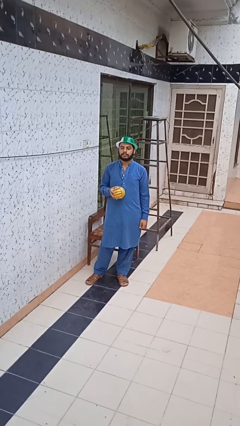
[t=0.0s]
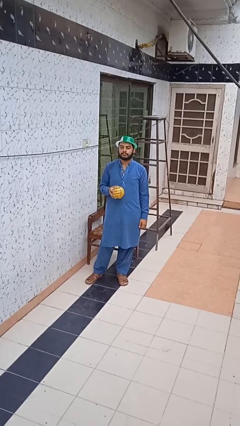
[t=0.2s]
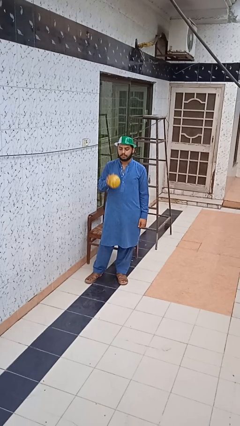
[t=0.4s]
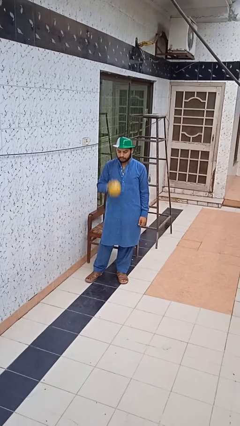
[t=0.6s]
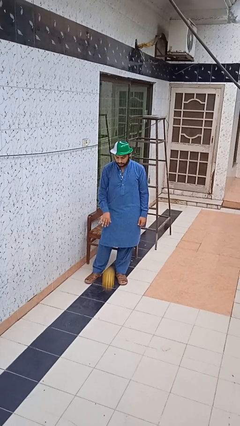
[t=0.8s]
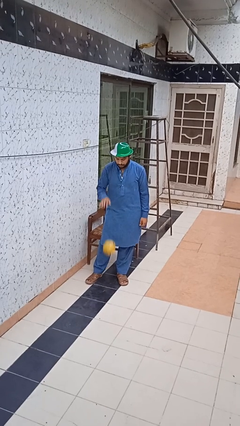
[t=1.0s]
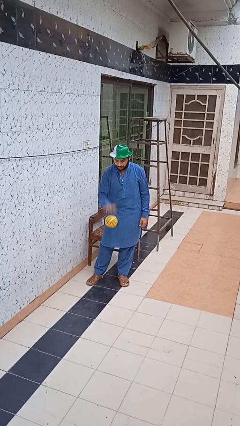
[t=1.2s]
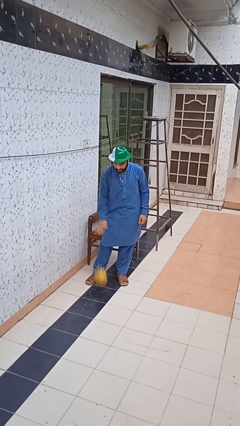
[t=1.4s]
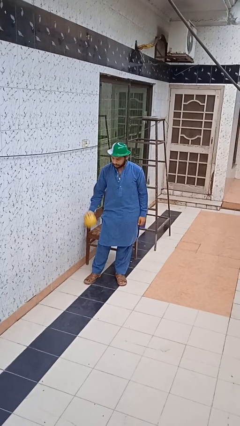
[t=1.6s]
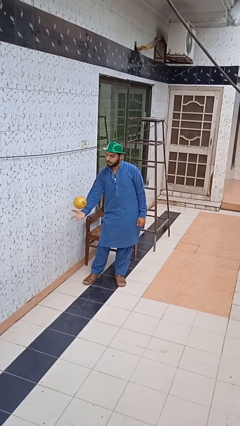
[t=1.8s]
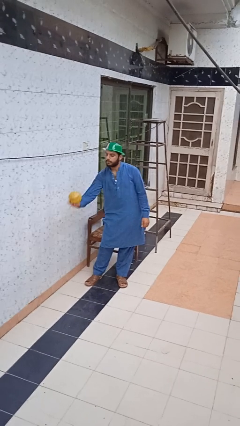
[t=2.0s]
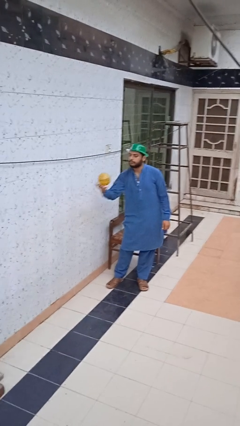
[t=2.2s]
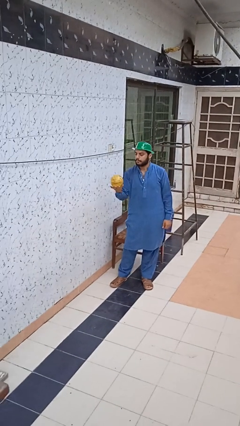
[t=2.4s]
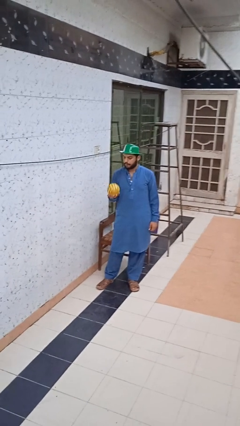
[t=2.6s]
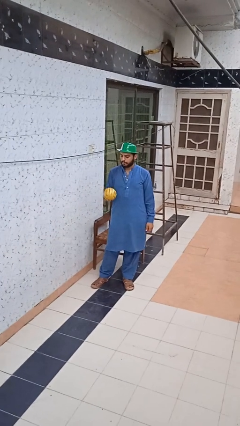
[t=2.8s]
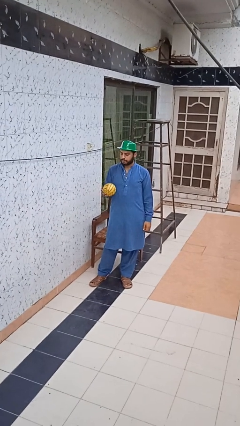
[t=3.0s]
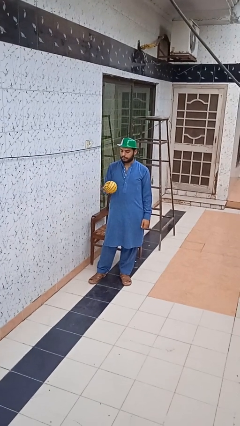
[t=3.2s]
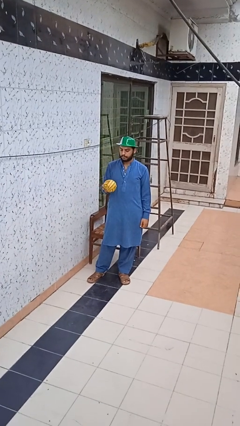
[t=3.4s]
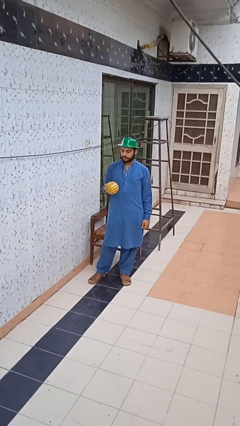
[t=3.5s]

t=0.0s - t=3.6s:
person bounces ball on floor

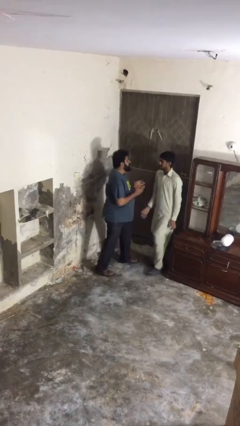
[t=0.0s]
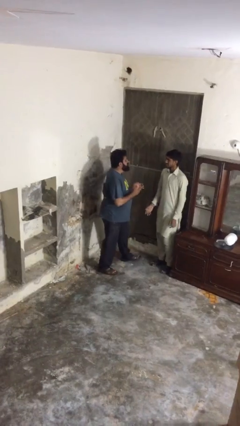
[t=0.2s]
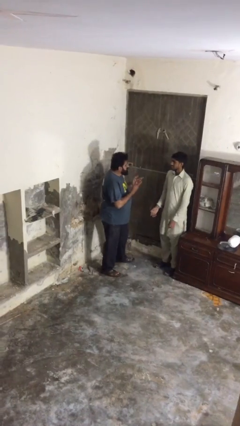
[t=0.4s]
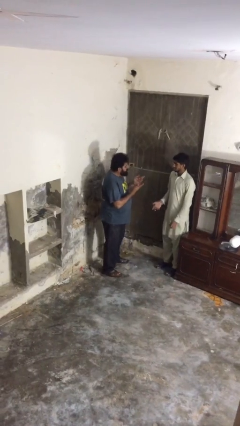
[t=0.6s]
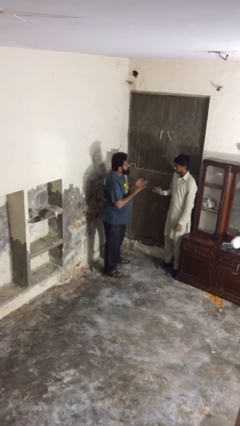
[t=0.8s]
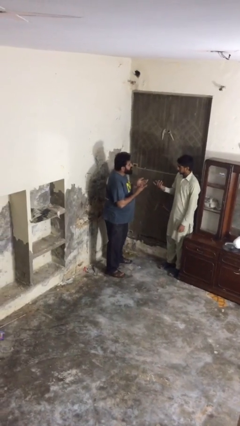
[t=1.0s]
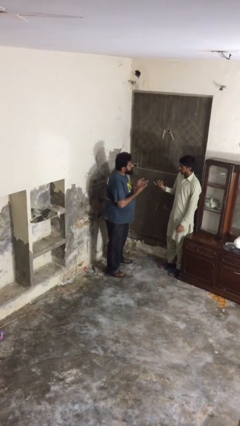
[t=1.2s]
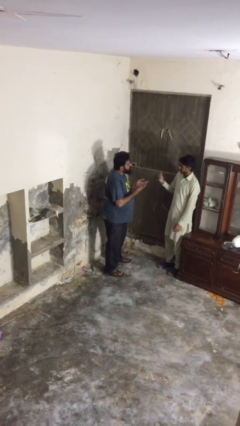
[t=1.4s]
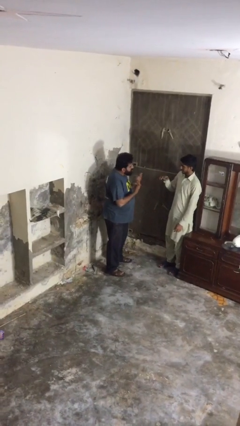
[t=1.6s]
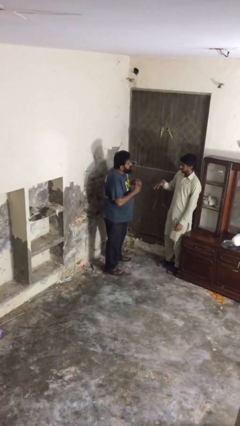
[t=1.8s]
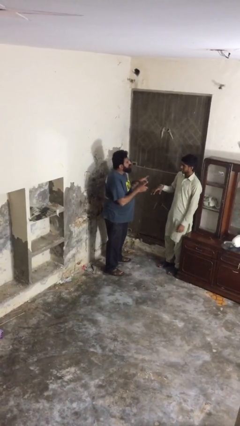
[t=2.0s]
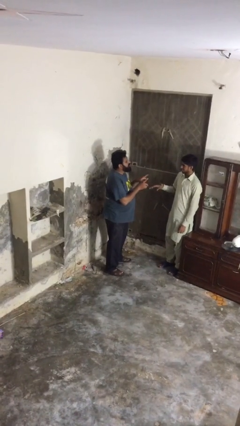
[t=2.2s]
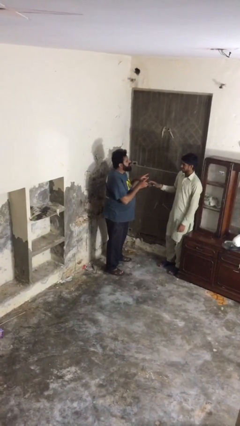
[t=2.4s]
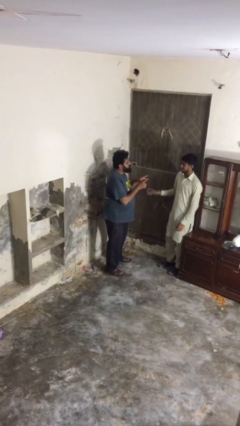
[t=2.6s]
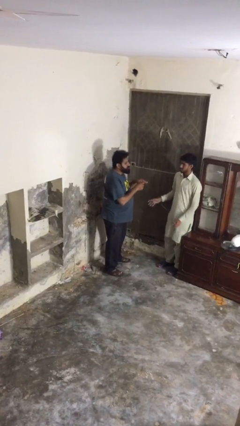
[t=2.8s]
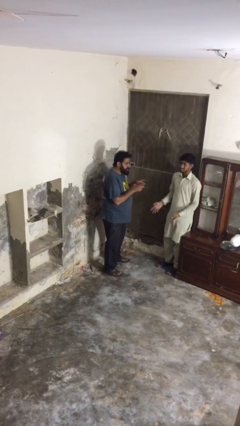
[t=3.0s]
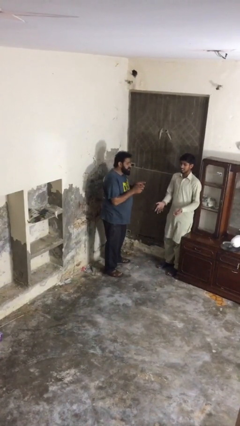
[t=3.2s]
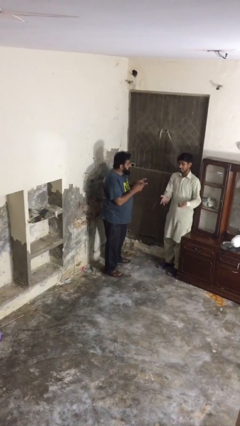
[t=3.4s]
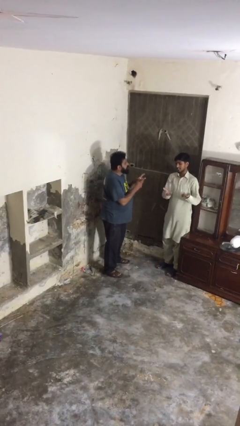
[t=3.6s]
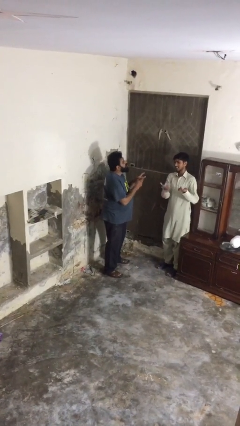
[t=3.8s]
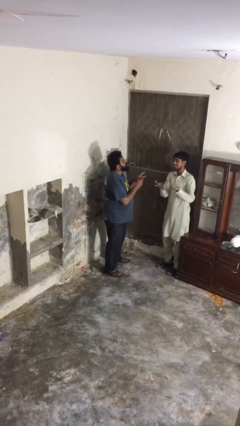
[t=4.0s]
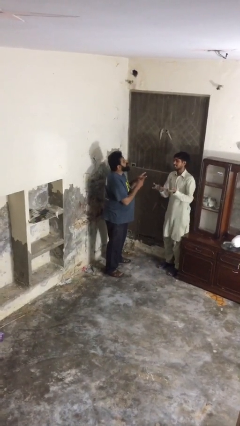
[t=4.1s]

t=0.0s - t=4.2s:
person talks to person

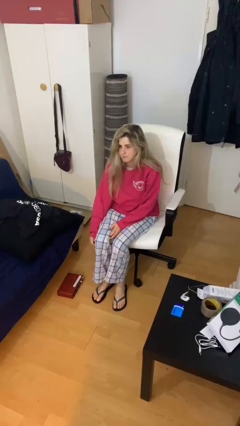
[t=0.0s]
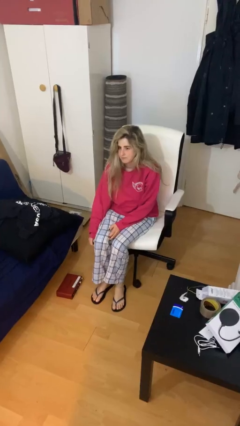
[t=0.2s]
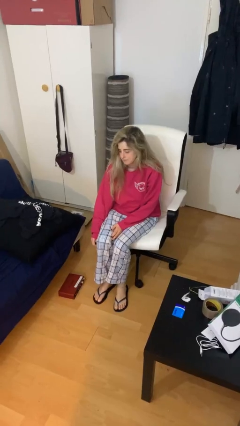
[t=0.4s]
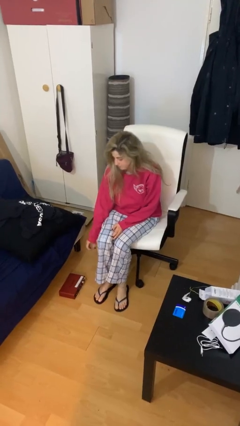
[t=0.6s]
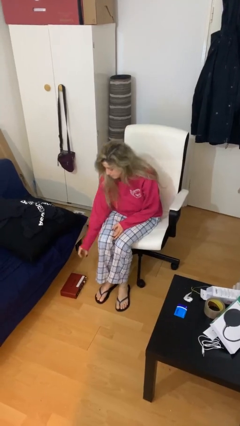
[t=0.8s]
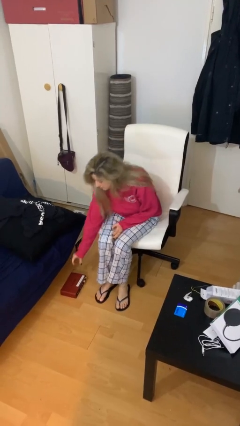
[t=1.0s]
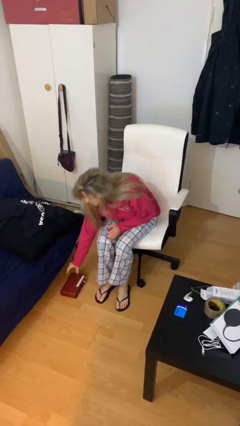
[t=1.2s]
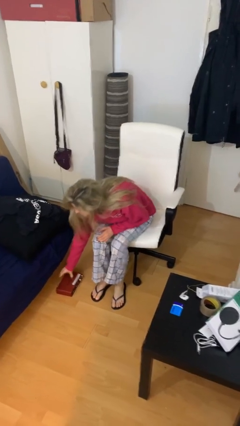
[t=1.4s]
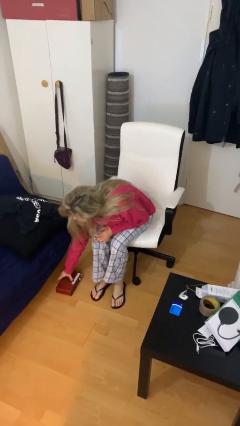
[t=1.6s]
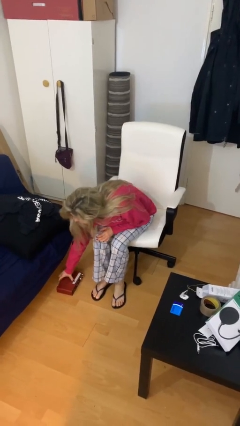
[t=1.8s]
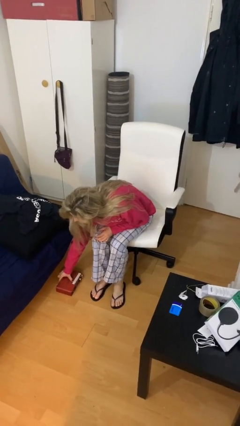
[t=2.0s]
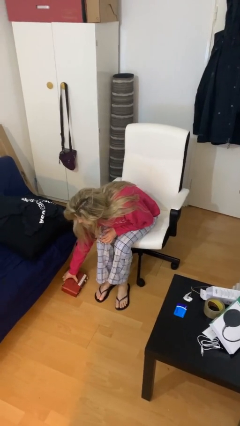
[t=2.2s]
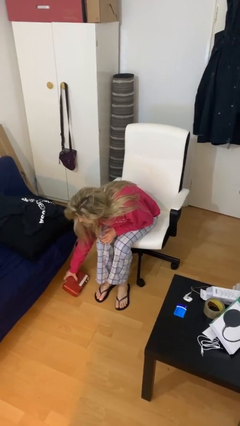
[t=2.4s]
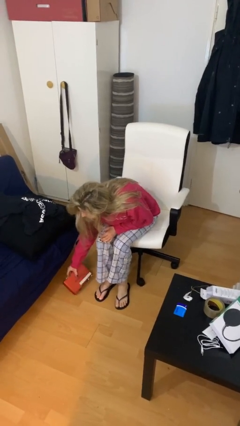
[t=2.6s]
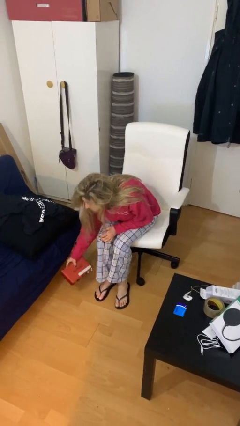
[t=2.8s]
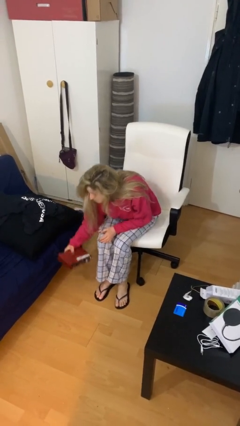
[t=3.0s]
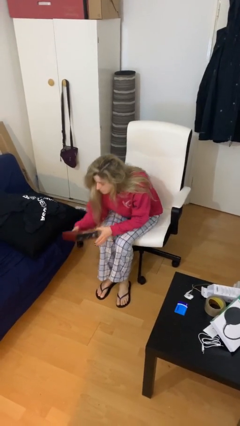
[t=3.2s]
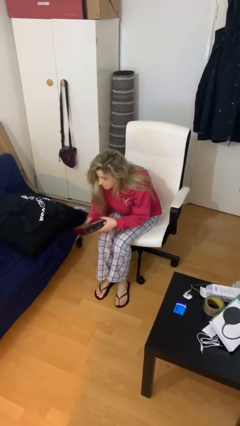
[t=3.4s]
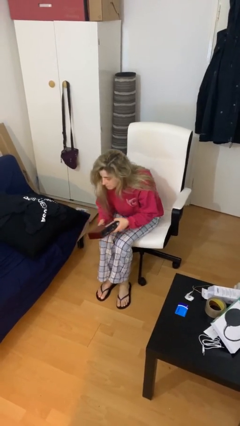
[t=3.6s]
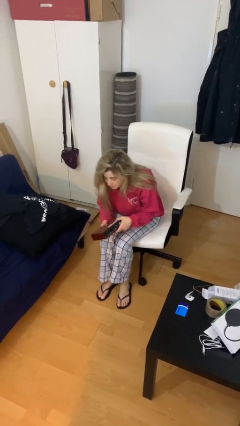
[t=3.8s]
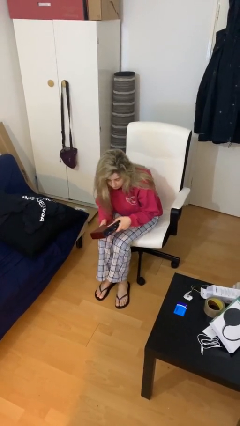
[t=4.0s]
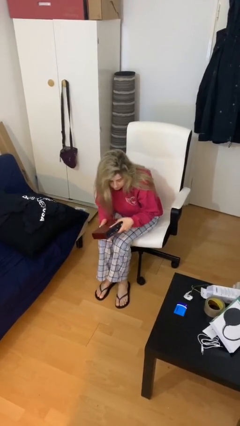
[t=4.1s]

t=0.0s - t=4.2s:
person picks up object from floor

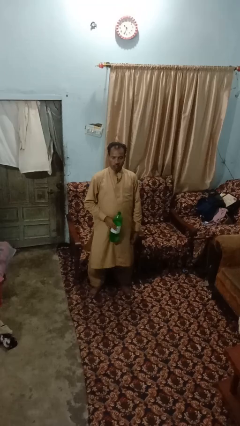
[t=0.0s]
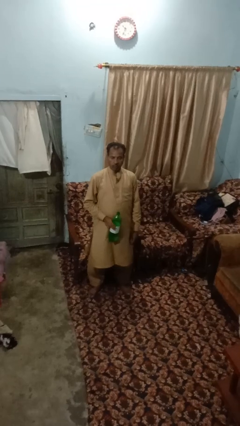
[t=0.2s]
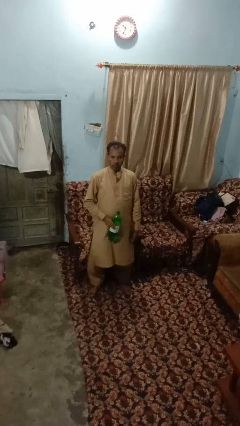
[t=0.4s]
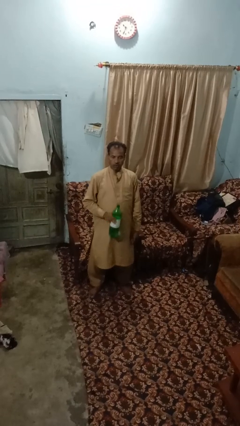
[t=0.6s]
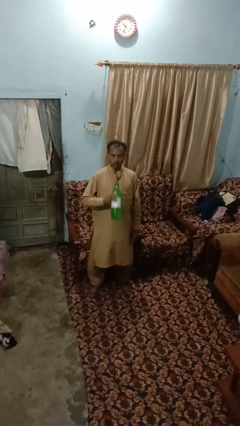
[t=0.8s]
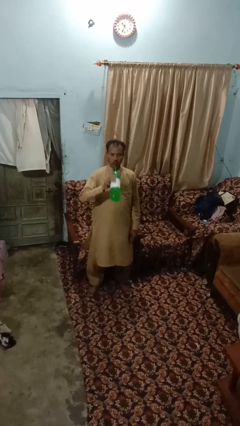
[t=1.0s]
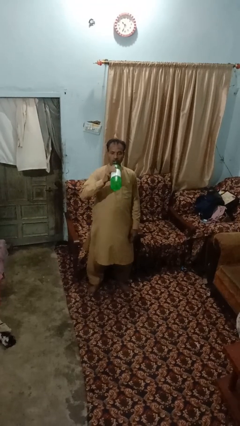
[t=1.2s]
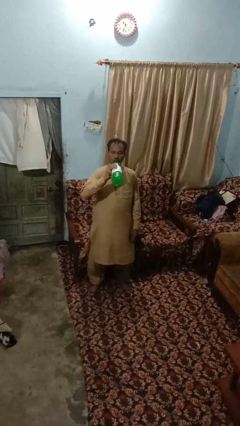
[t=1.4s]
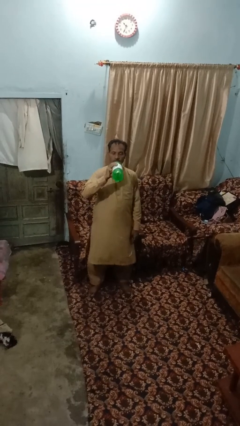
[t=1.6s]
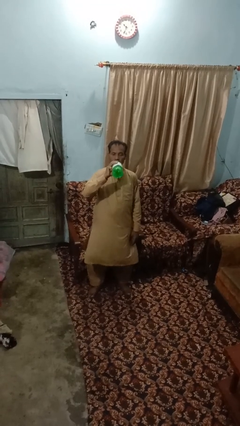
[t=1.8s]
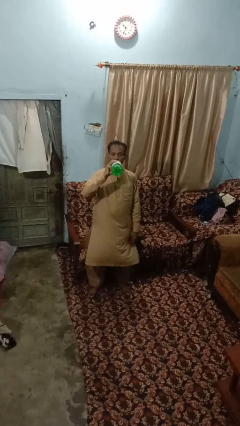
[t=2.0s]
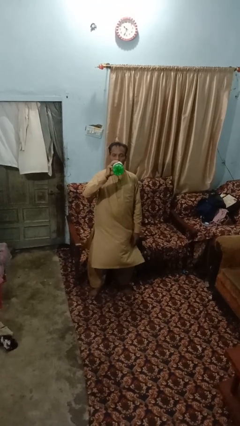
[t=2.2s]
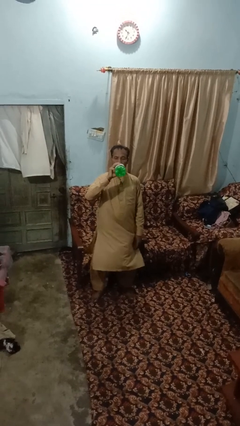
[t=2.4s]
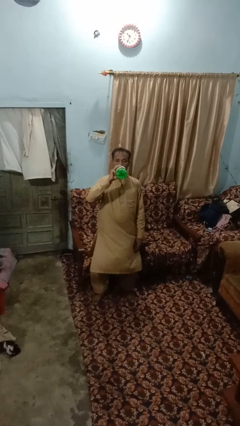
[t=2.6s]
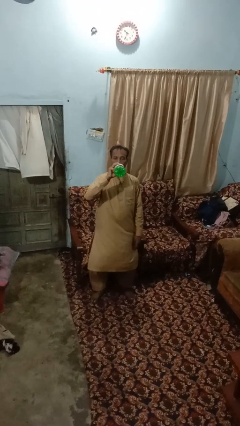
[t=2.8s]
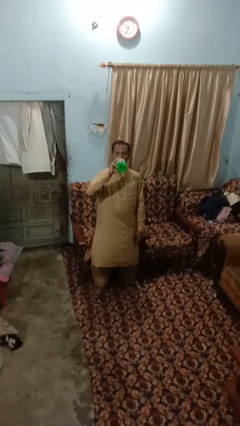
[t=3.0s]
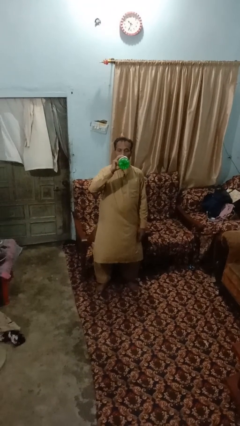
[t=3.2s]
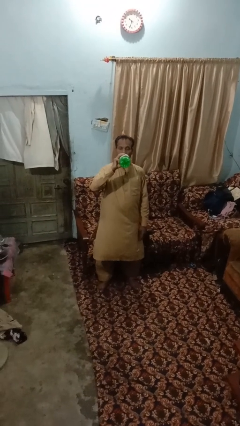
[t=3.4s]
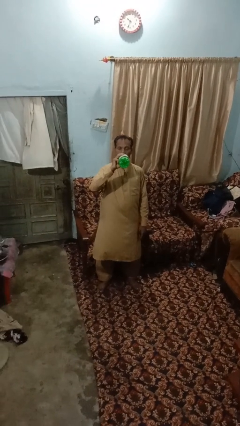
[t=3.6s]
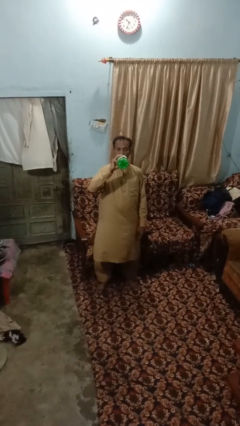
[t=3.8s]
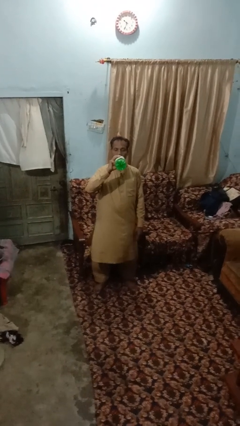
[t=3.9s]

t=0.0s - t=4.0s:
person drinks from bottle

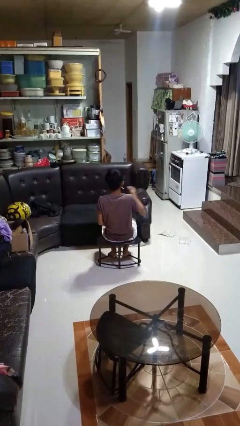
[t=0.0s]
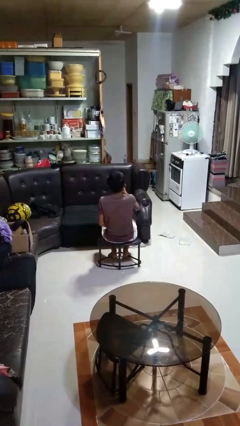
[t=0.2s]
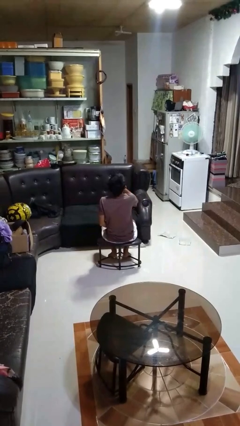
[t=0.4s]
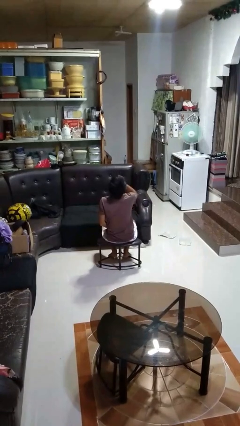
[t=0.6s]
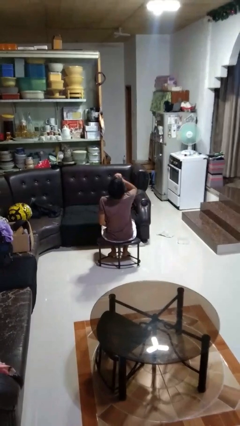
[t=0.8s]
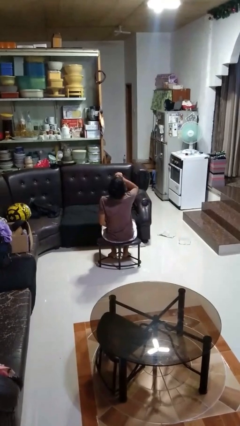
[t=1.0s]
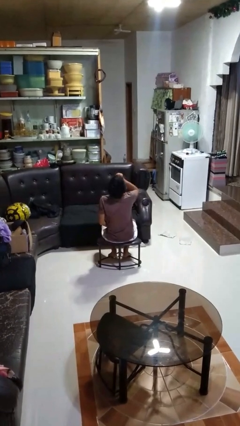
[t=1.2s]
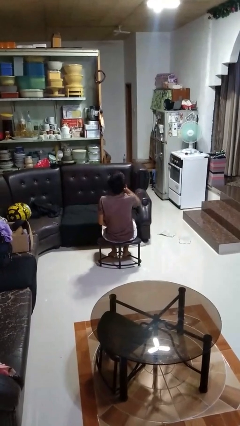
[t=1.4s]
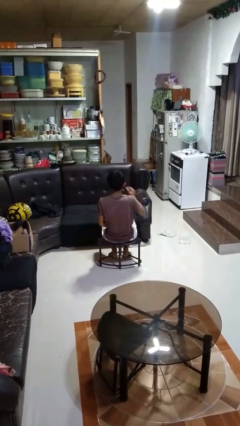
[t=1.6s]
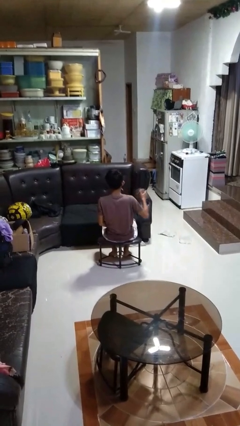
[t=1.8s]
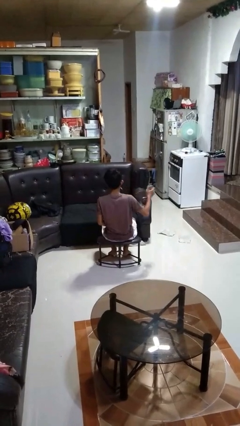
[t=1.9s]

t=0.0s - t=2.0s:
person drinks from beverage can
